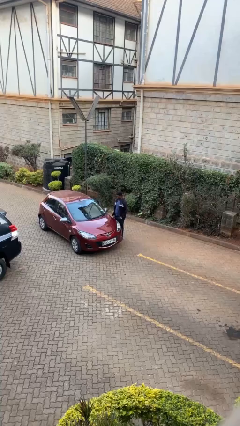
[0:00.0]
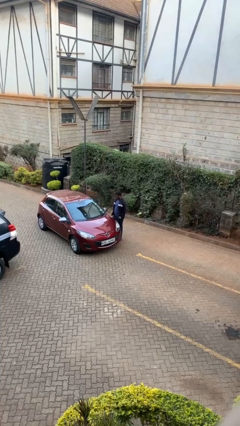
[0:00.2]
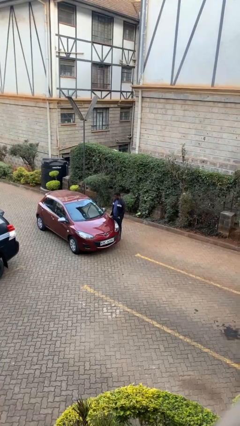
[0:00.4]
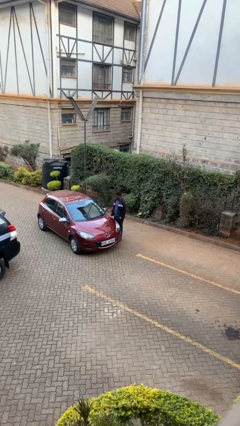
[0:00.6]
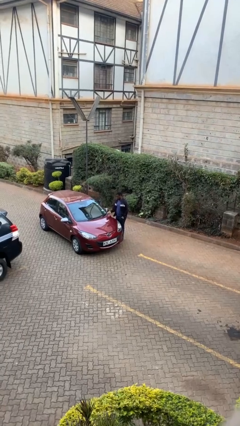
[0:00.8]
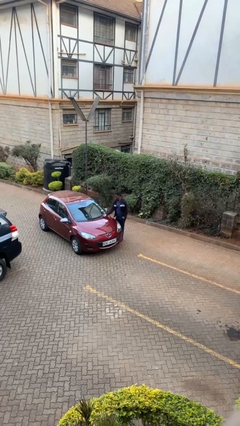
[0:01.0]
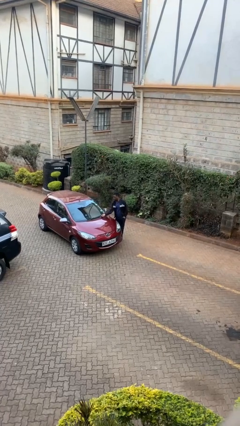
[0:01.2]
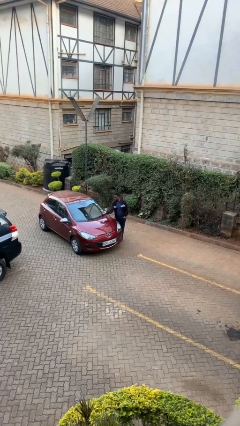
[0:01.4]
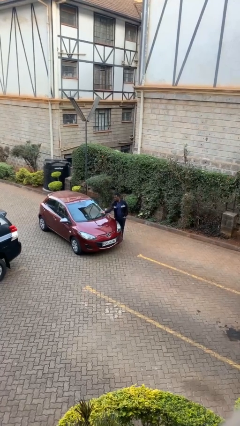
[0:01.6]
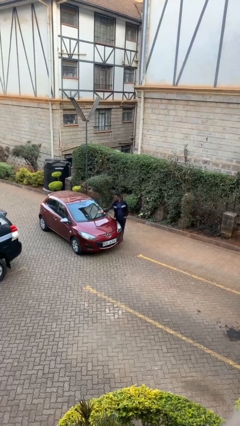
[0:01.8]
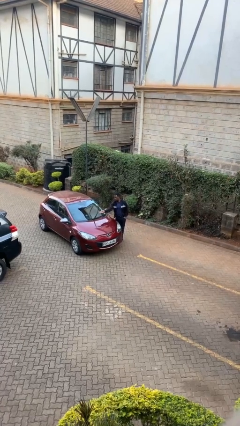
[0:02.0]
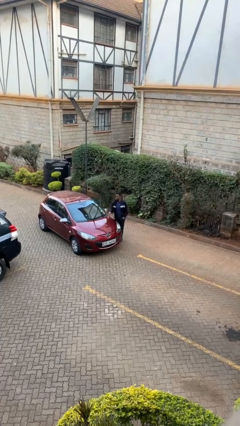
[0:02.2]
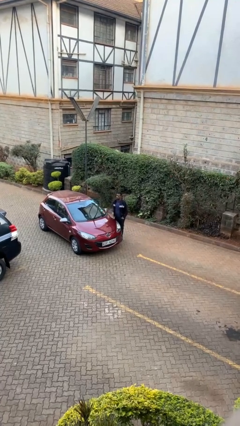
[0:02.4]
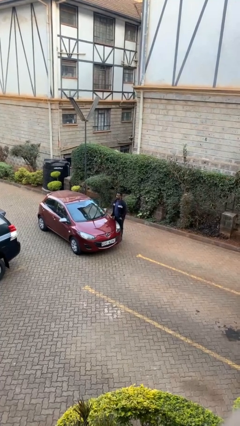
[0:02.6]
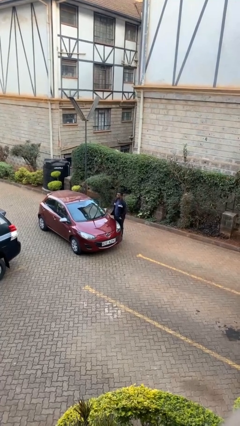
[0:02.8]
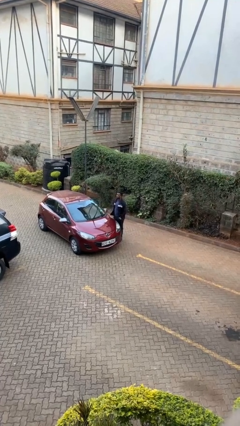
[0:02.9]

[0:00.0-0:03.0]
person flips up car wipers

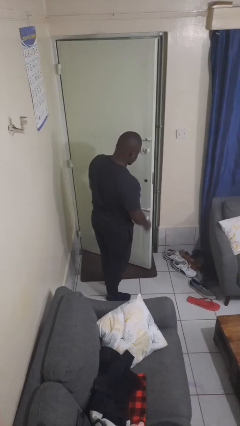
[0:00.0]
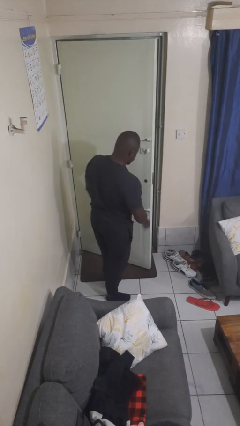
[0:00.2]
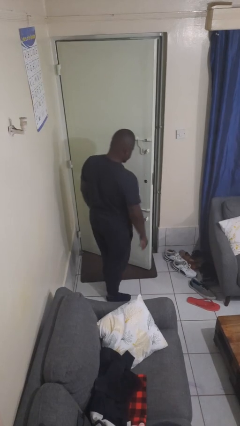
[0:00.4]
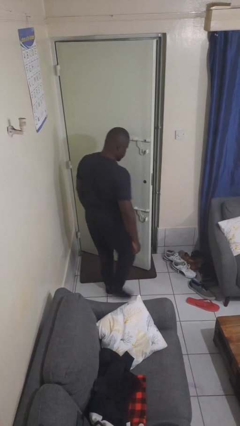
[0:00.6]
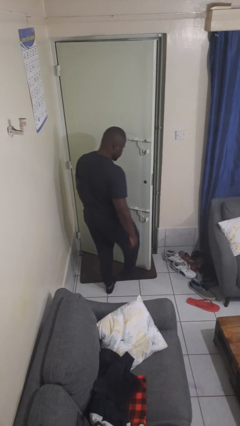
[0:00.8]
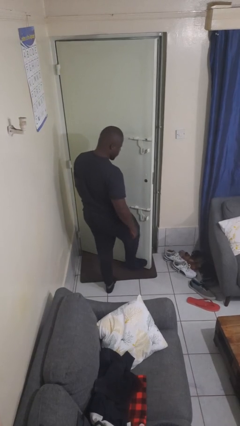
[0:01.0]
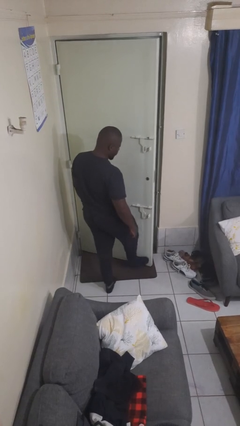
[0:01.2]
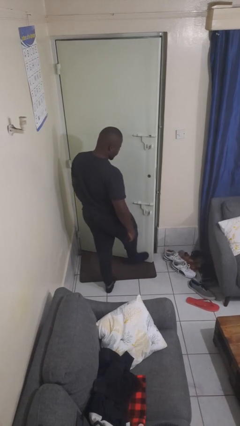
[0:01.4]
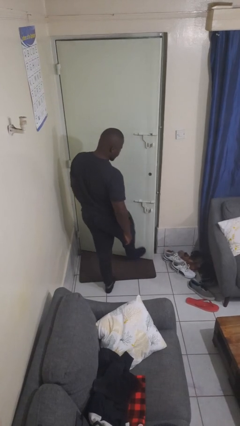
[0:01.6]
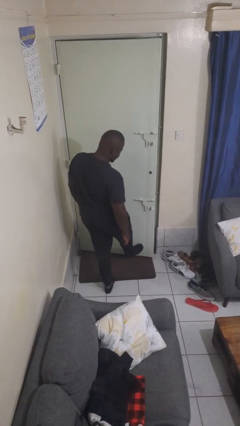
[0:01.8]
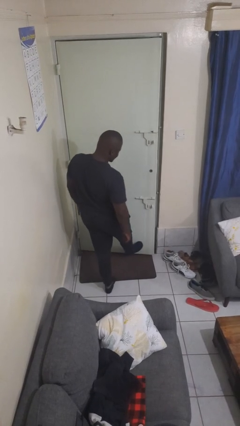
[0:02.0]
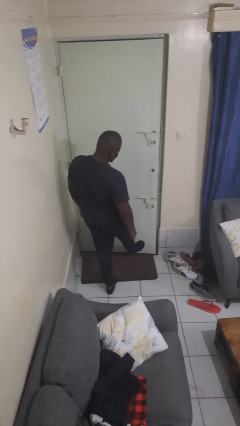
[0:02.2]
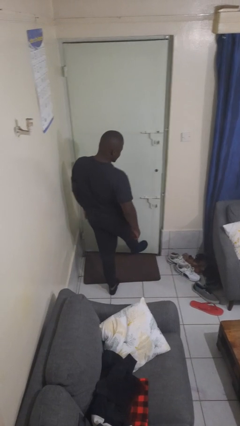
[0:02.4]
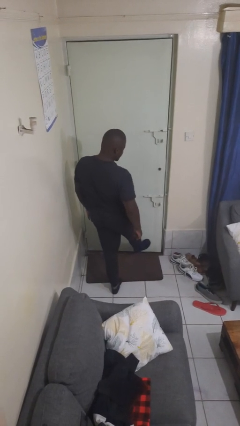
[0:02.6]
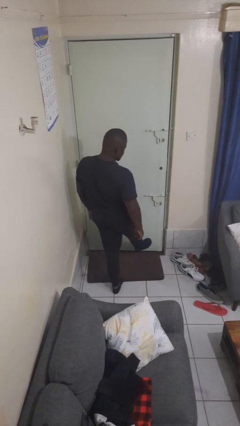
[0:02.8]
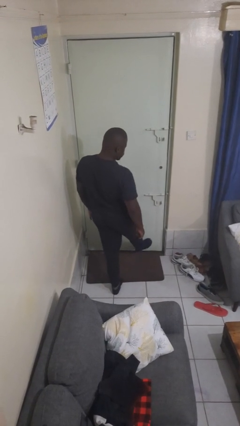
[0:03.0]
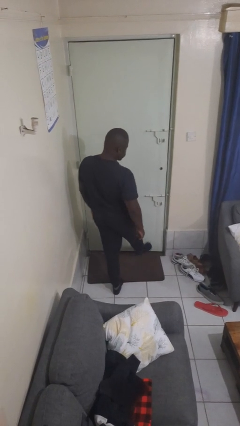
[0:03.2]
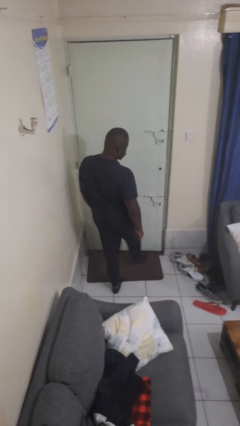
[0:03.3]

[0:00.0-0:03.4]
person closes door with foot

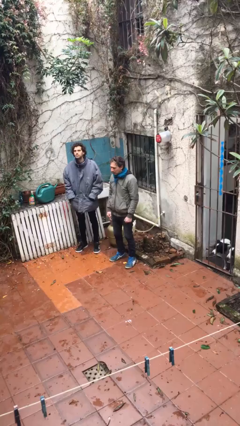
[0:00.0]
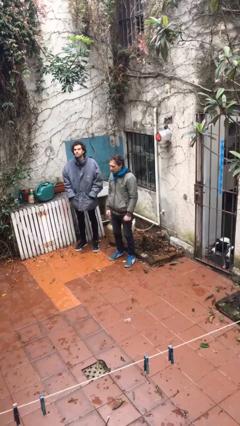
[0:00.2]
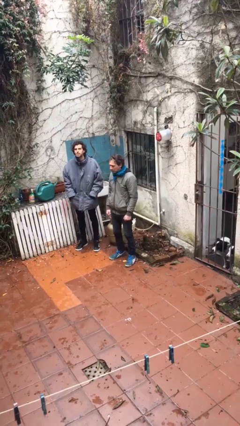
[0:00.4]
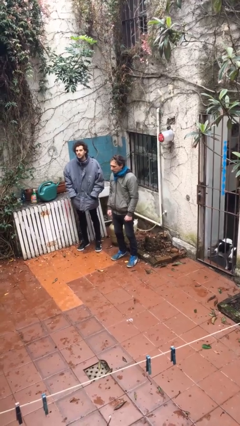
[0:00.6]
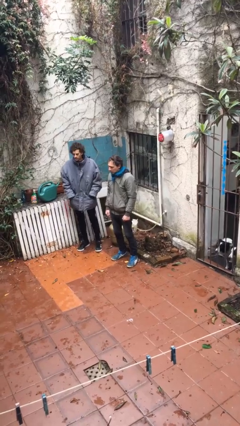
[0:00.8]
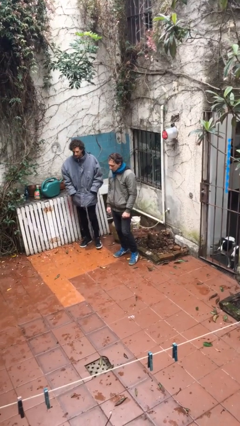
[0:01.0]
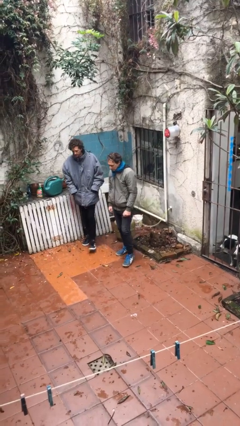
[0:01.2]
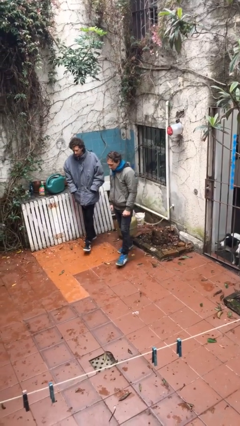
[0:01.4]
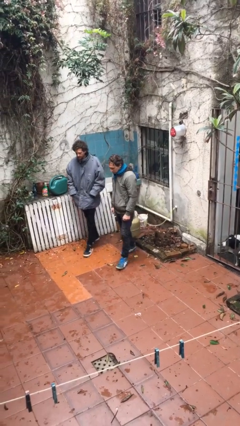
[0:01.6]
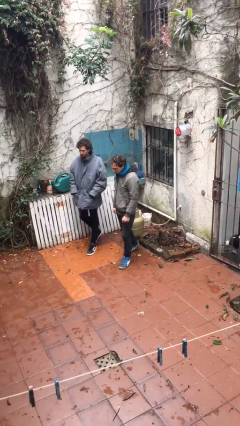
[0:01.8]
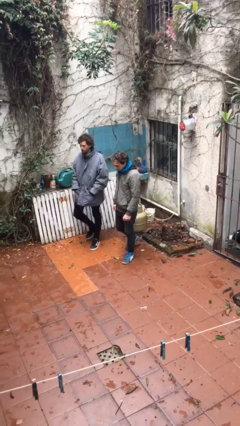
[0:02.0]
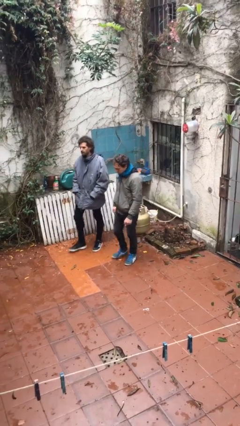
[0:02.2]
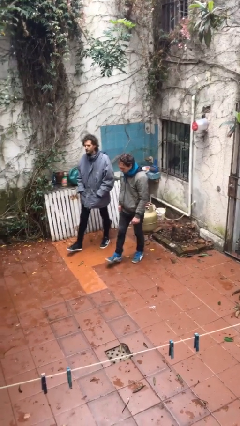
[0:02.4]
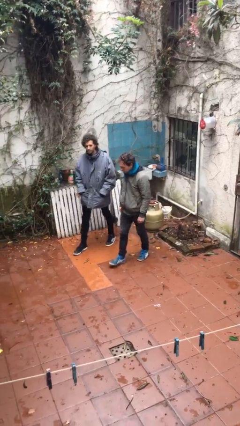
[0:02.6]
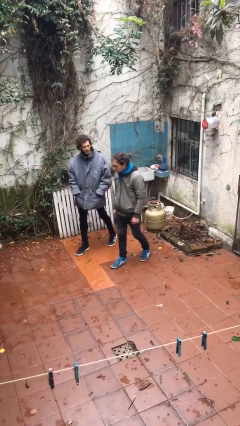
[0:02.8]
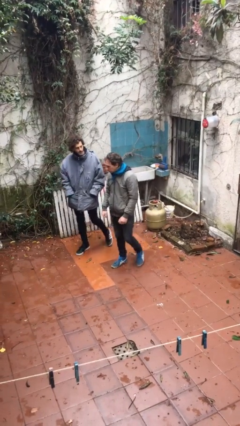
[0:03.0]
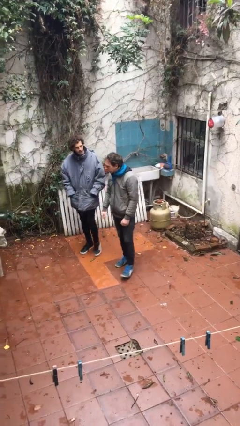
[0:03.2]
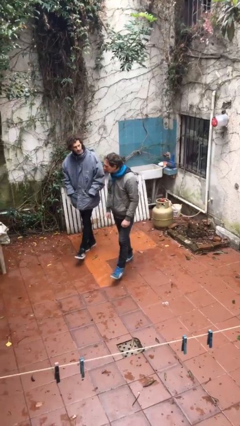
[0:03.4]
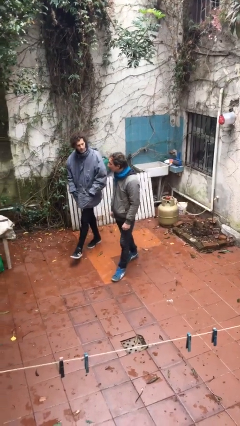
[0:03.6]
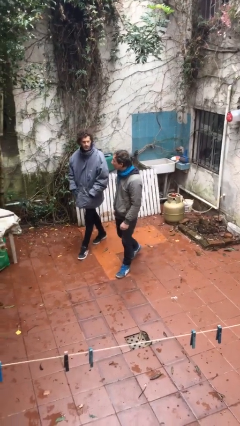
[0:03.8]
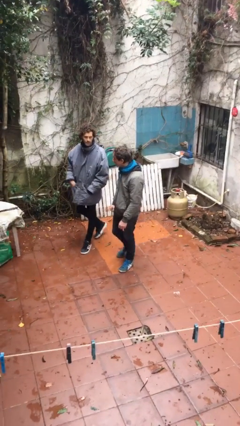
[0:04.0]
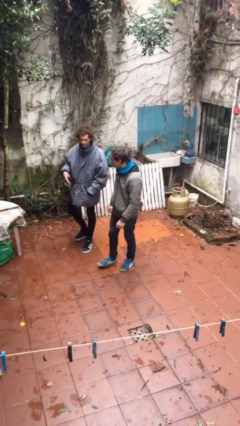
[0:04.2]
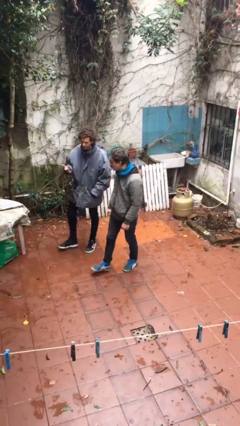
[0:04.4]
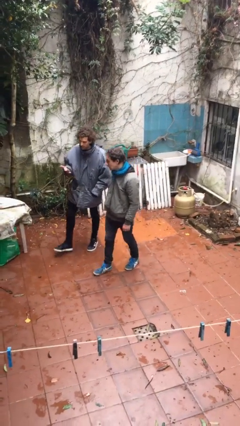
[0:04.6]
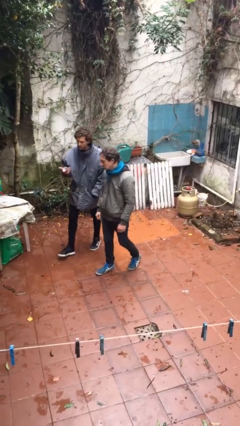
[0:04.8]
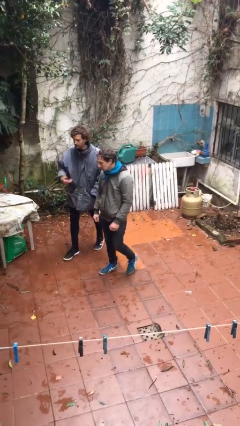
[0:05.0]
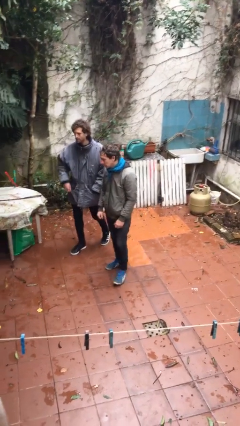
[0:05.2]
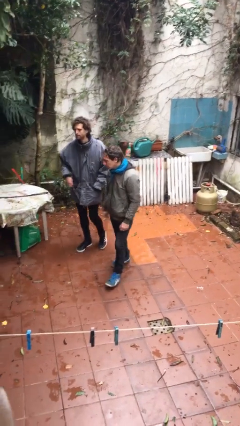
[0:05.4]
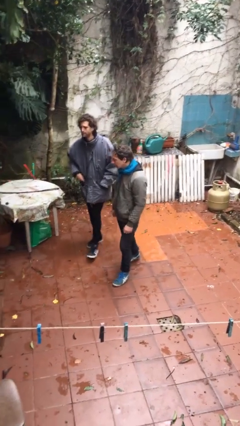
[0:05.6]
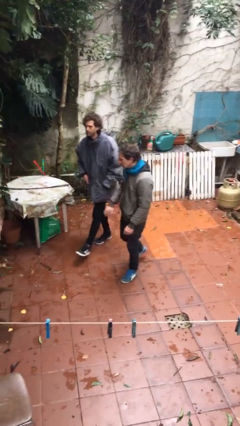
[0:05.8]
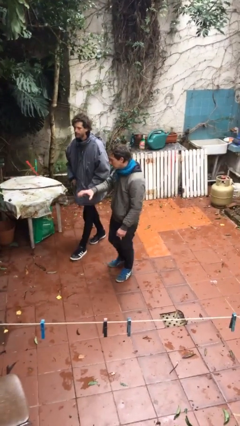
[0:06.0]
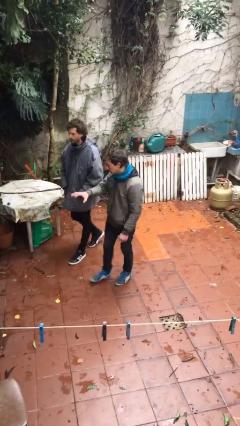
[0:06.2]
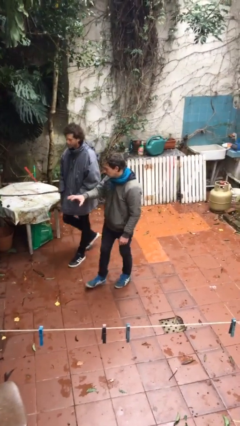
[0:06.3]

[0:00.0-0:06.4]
person talks to person

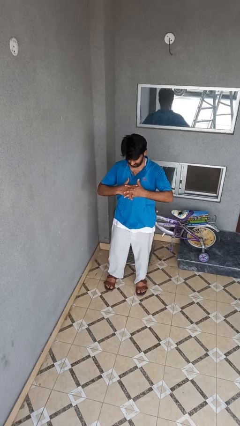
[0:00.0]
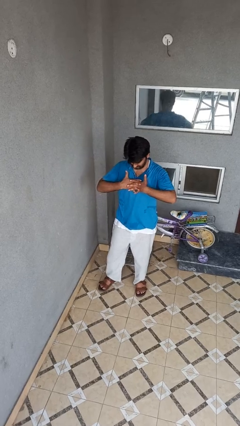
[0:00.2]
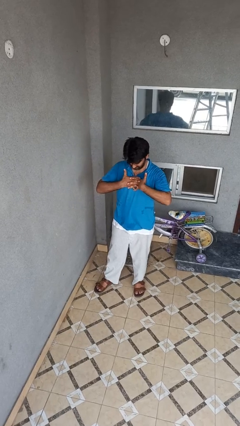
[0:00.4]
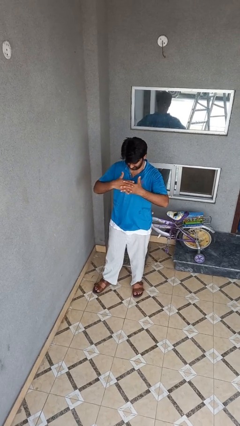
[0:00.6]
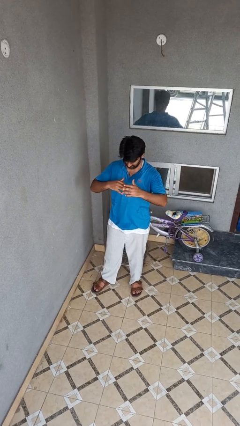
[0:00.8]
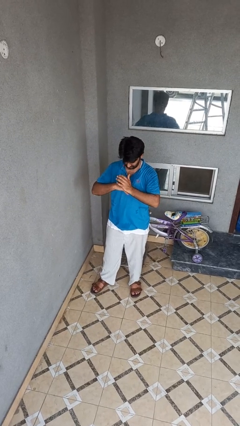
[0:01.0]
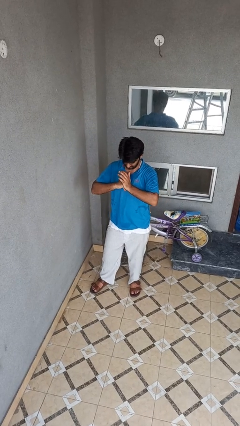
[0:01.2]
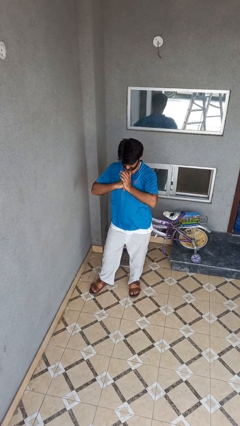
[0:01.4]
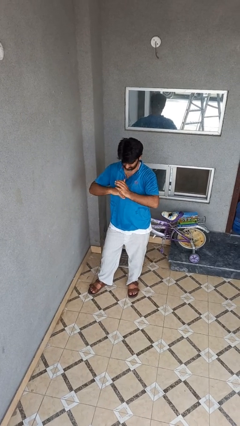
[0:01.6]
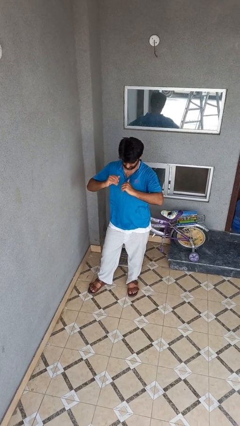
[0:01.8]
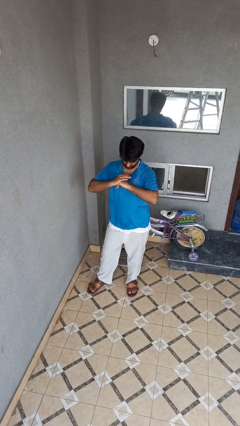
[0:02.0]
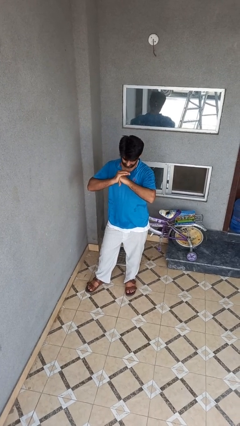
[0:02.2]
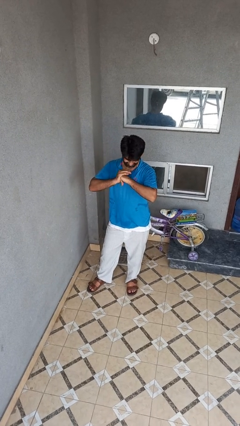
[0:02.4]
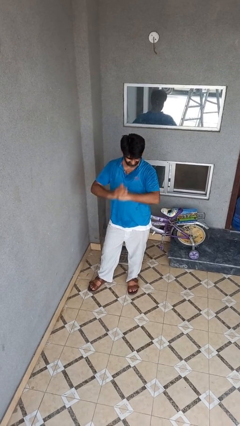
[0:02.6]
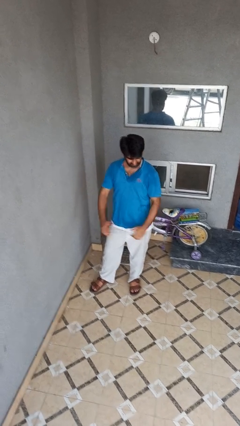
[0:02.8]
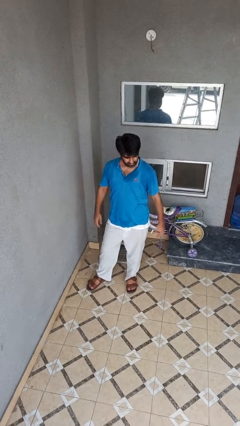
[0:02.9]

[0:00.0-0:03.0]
person cracks knuckles

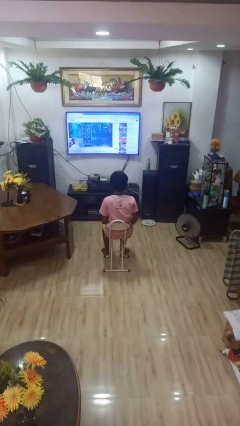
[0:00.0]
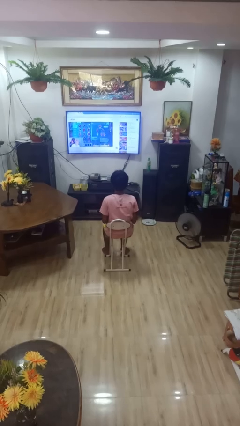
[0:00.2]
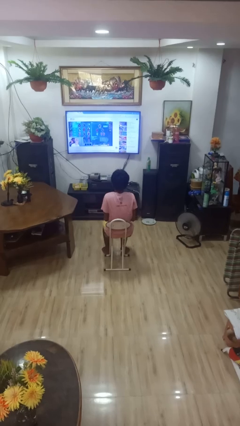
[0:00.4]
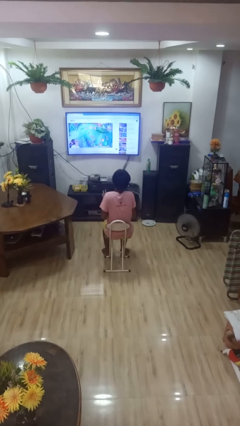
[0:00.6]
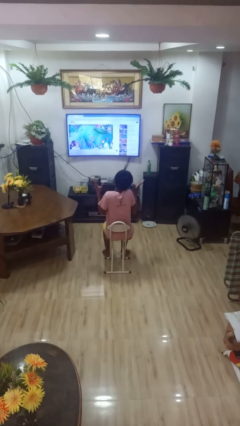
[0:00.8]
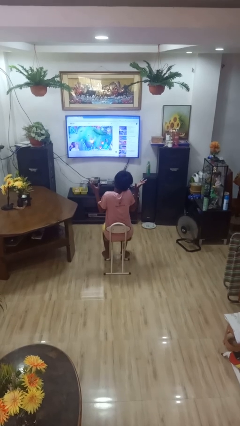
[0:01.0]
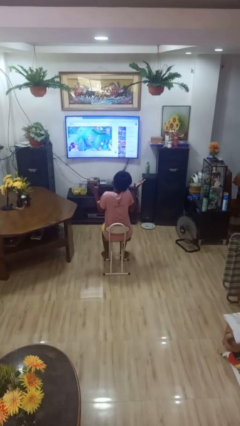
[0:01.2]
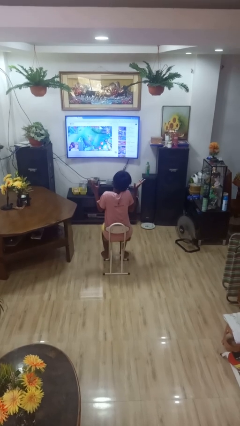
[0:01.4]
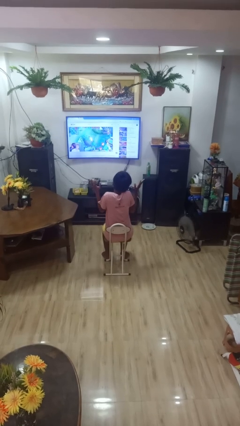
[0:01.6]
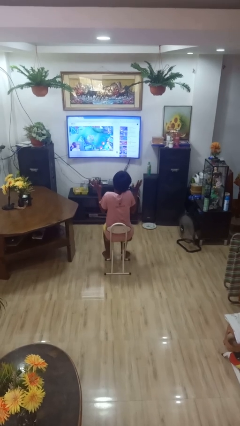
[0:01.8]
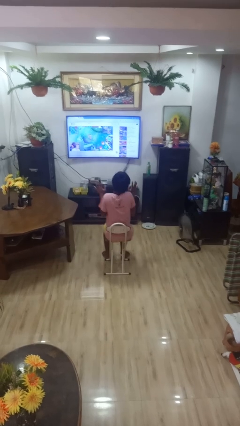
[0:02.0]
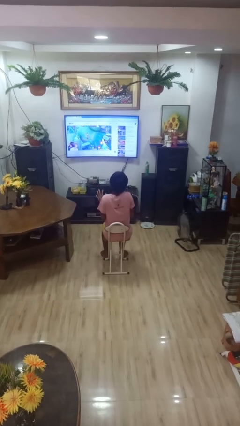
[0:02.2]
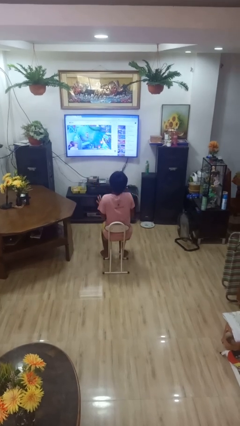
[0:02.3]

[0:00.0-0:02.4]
person shrugs
